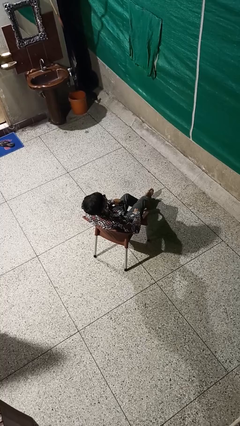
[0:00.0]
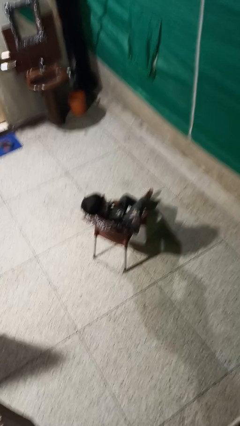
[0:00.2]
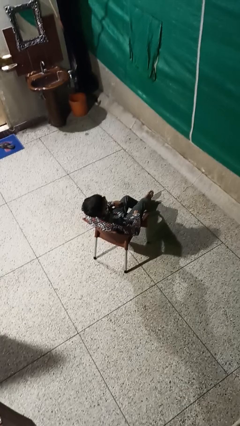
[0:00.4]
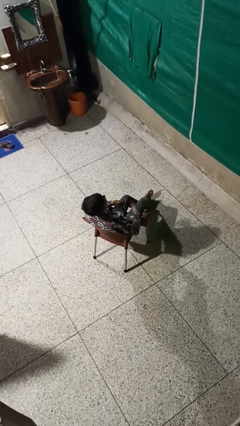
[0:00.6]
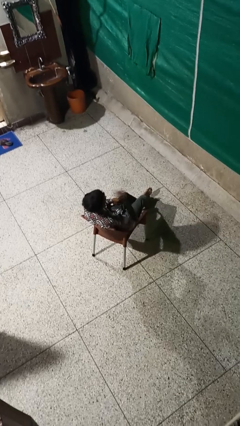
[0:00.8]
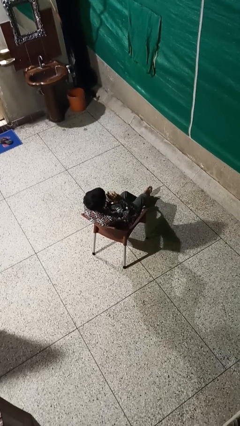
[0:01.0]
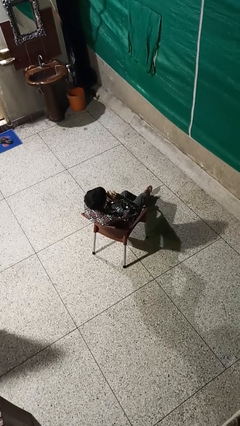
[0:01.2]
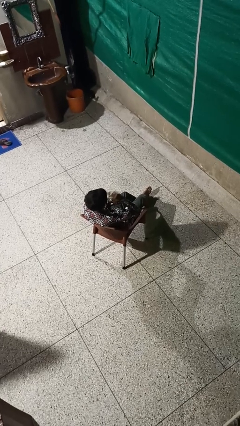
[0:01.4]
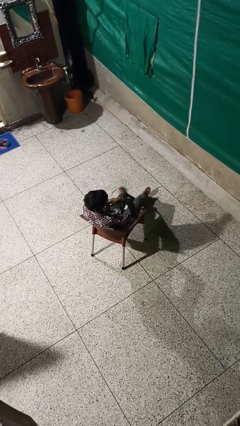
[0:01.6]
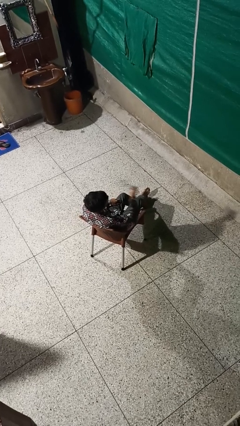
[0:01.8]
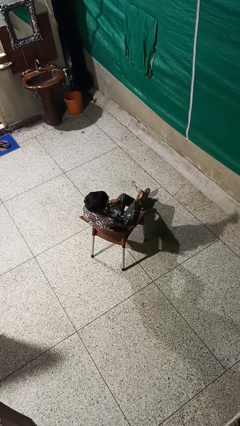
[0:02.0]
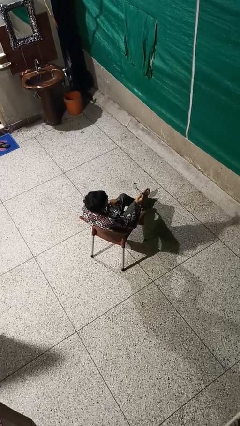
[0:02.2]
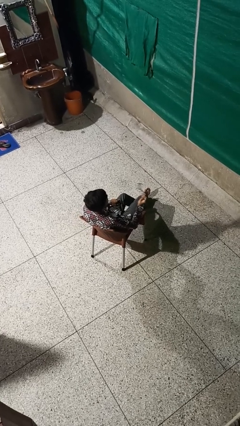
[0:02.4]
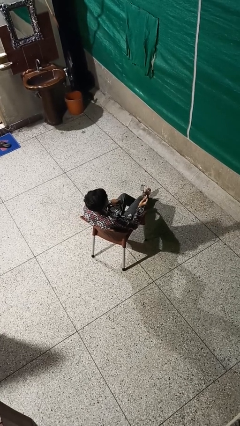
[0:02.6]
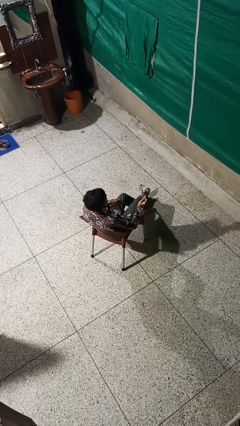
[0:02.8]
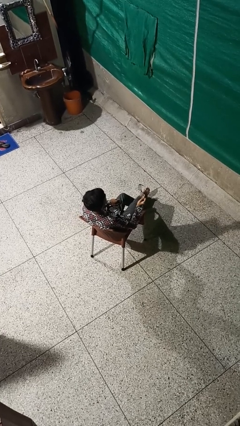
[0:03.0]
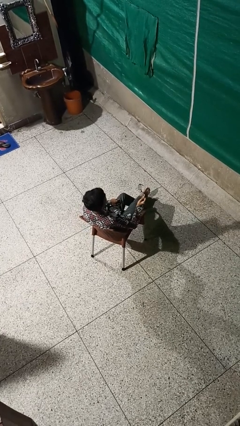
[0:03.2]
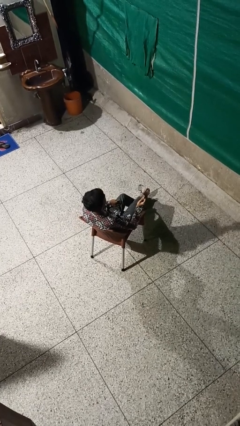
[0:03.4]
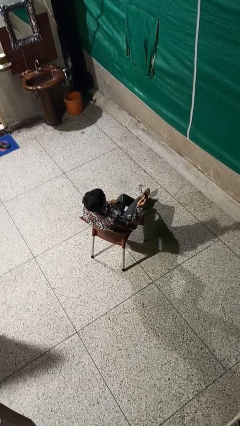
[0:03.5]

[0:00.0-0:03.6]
person takes off glasses

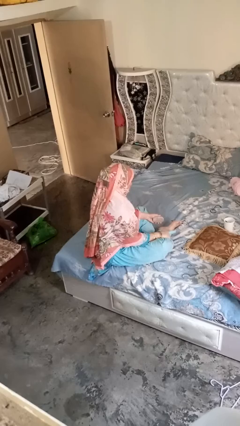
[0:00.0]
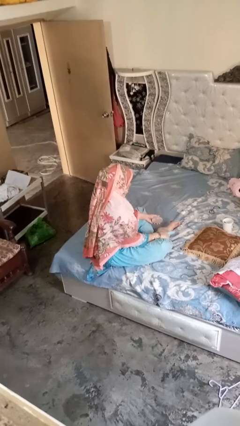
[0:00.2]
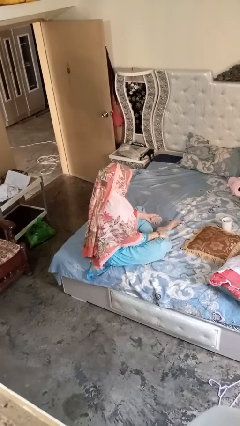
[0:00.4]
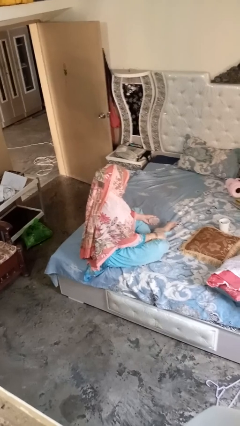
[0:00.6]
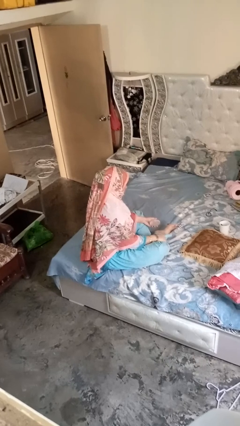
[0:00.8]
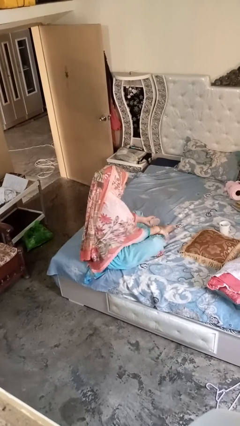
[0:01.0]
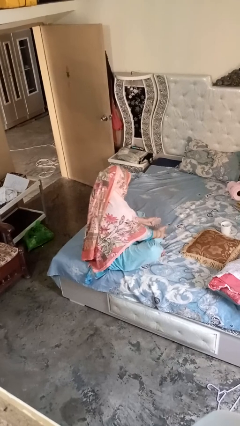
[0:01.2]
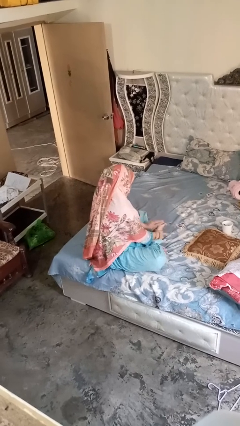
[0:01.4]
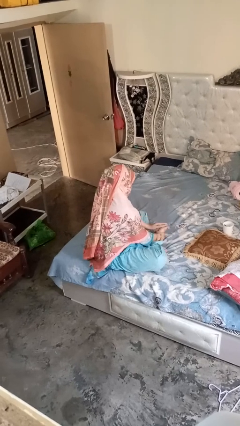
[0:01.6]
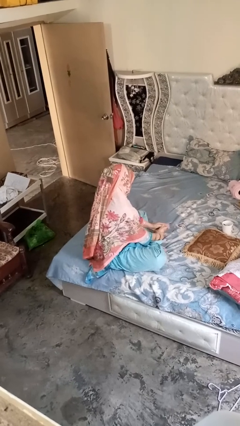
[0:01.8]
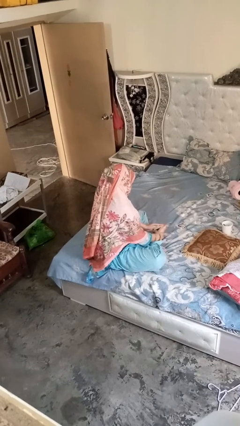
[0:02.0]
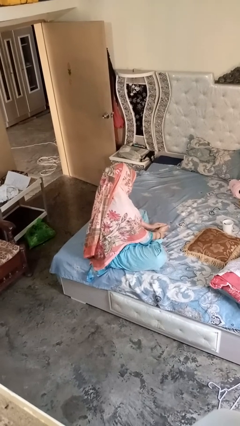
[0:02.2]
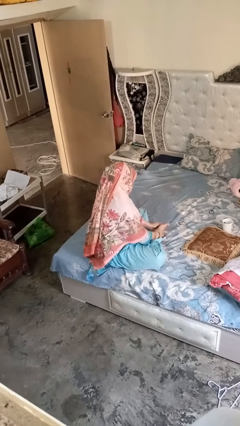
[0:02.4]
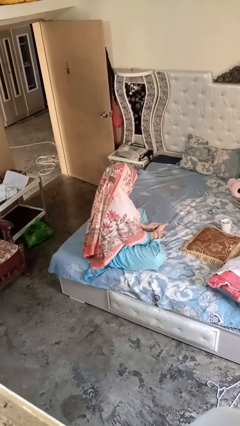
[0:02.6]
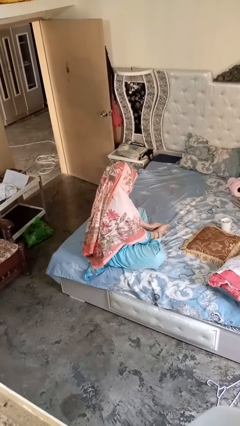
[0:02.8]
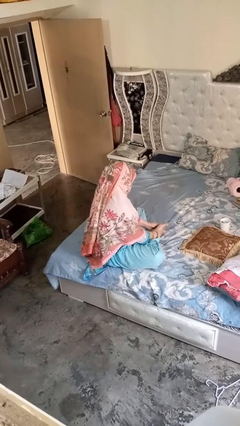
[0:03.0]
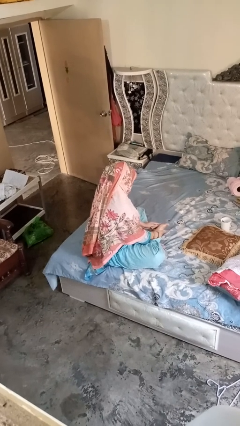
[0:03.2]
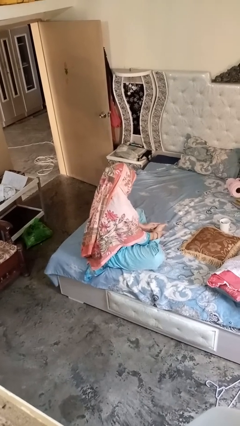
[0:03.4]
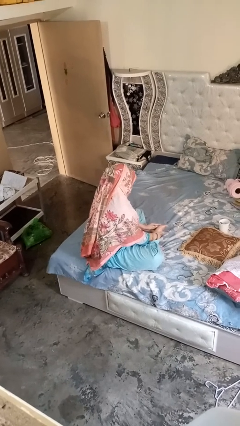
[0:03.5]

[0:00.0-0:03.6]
person rubs foot

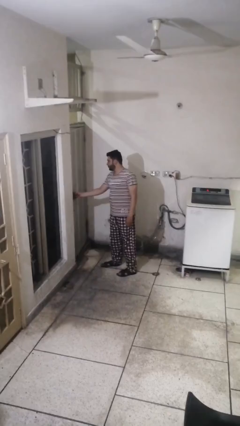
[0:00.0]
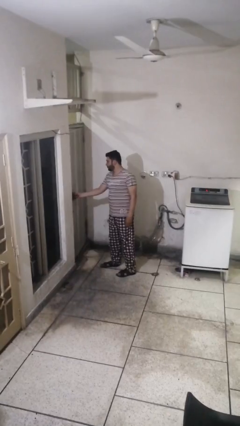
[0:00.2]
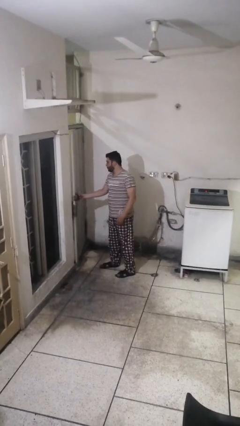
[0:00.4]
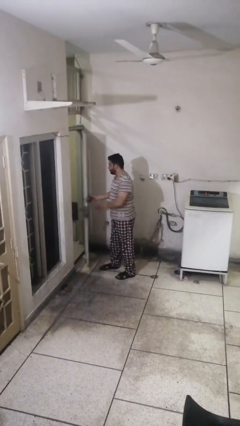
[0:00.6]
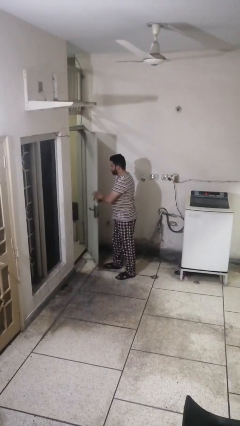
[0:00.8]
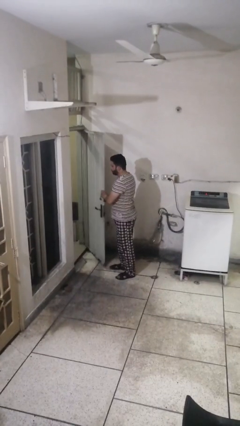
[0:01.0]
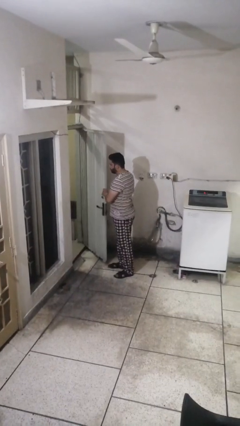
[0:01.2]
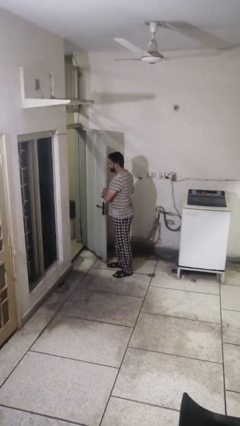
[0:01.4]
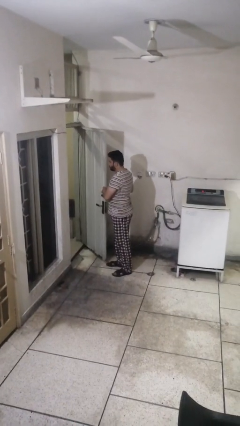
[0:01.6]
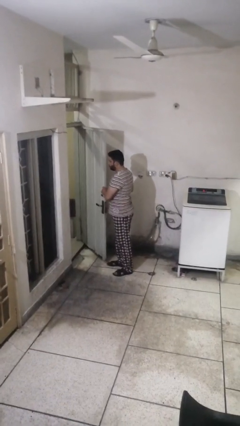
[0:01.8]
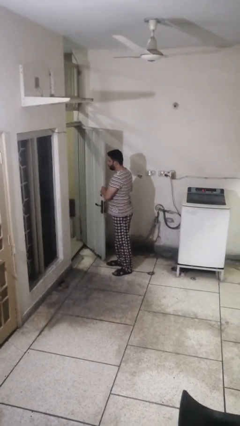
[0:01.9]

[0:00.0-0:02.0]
person opens facility door

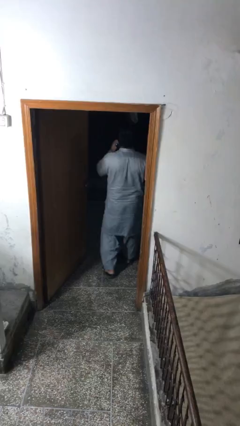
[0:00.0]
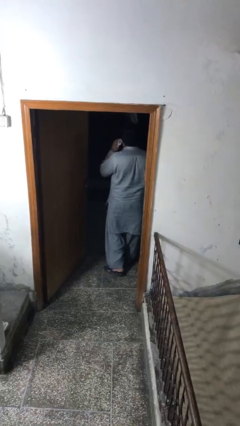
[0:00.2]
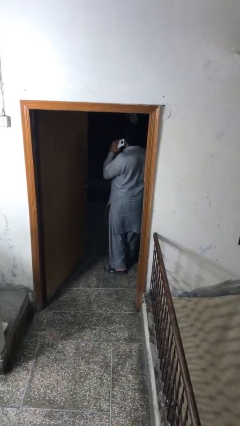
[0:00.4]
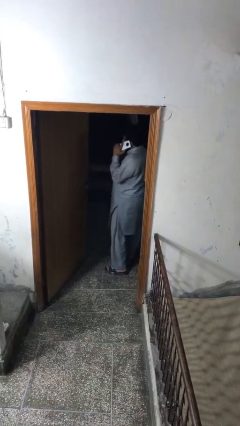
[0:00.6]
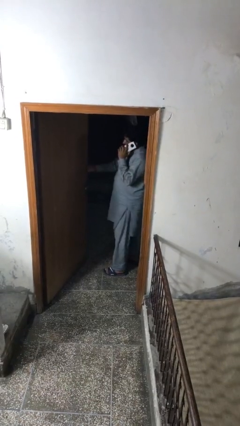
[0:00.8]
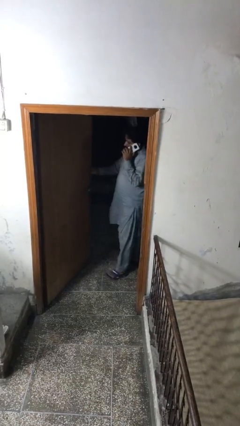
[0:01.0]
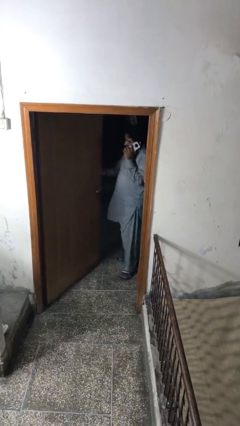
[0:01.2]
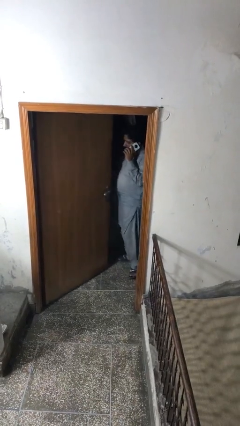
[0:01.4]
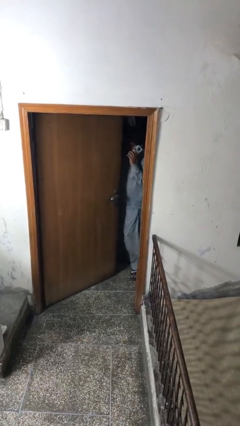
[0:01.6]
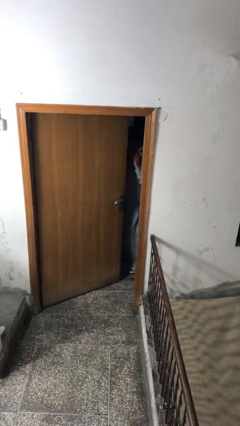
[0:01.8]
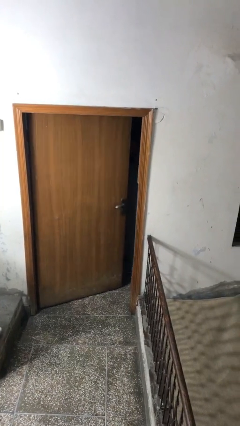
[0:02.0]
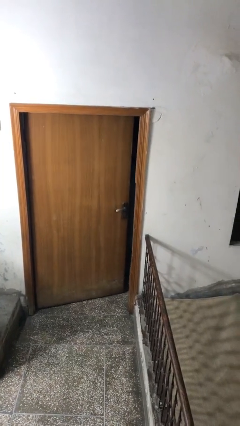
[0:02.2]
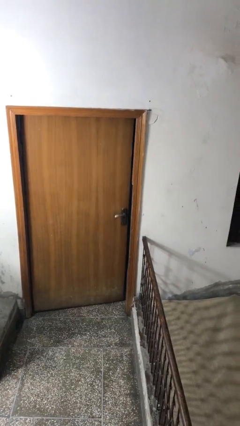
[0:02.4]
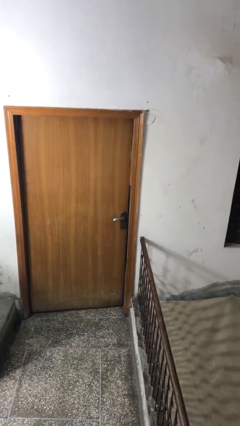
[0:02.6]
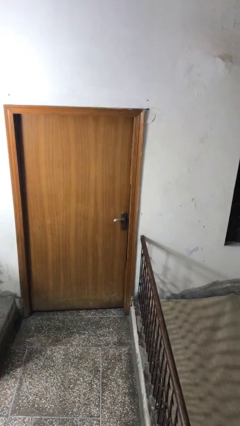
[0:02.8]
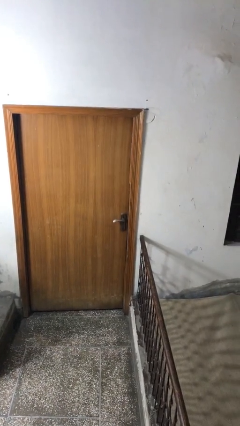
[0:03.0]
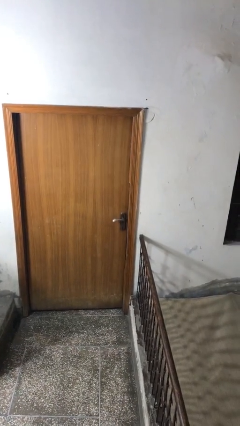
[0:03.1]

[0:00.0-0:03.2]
person closes facility door

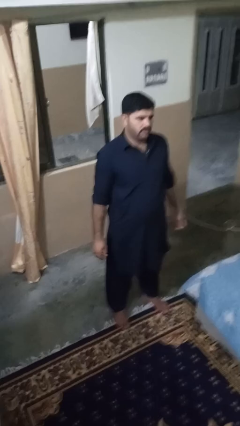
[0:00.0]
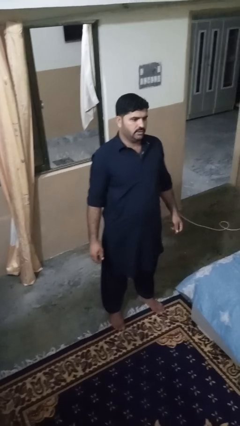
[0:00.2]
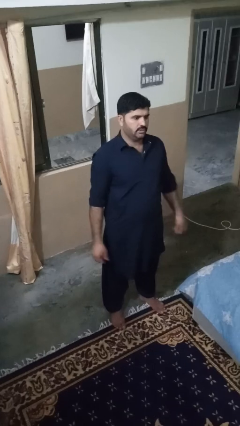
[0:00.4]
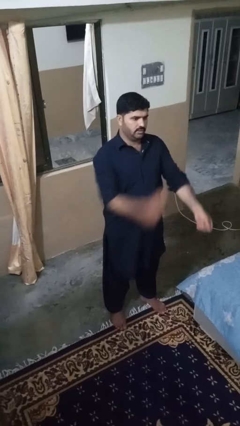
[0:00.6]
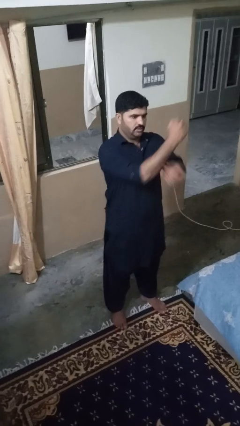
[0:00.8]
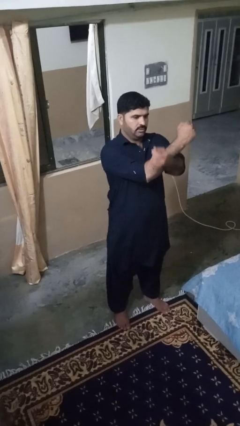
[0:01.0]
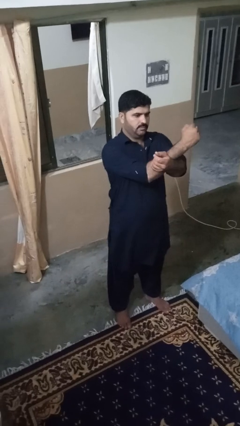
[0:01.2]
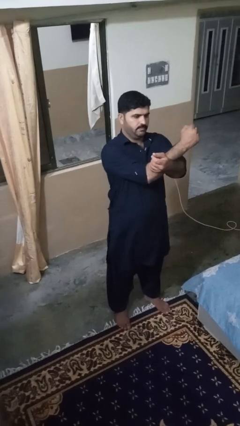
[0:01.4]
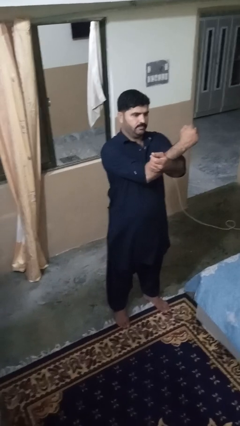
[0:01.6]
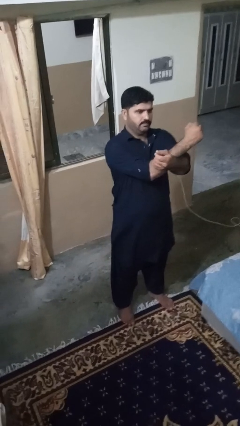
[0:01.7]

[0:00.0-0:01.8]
person crosses arms

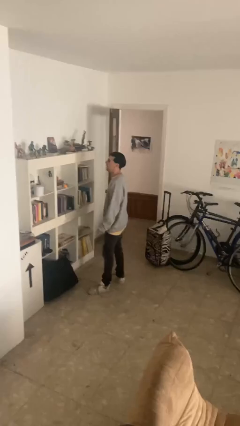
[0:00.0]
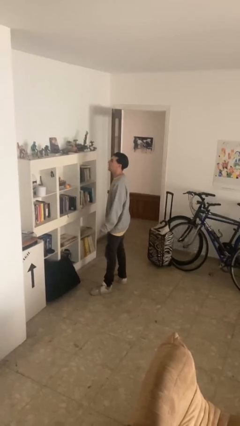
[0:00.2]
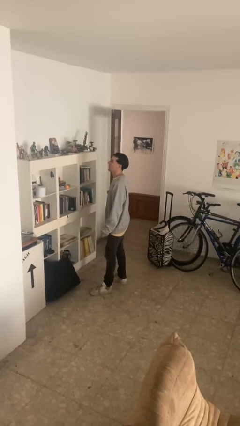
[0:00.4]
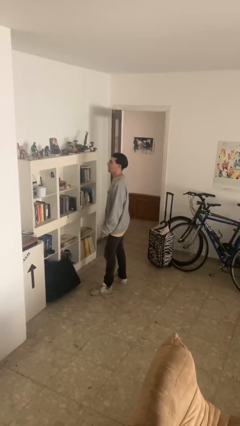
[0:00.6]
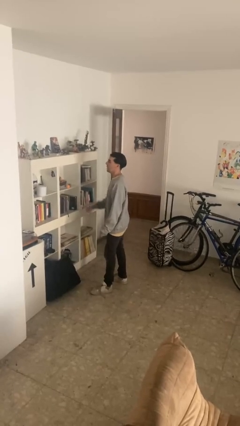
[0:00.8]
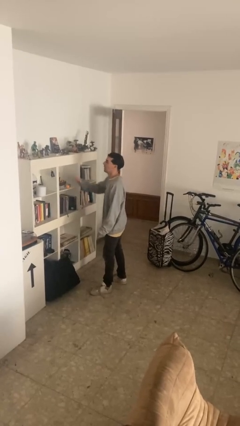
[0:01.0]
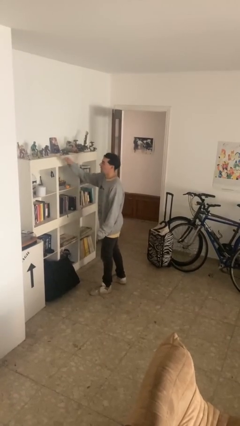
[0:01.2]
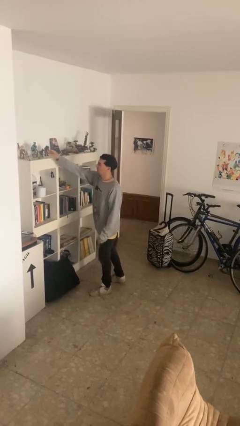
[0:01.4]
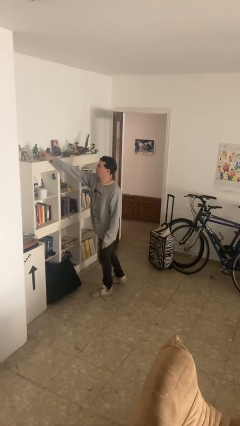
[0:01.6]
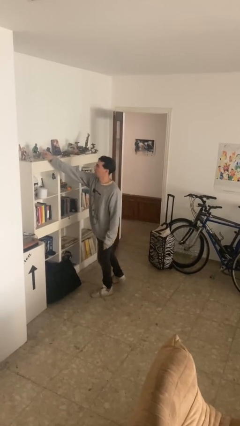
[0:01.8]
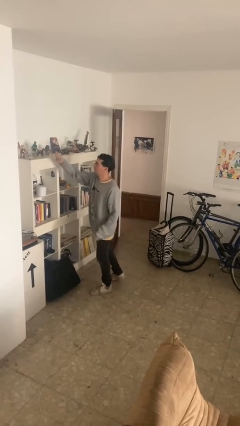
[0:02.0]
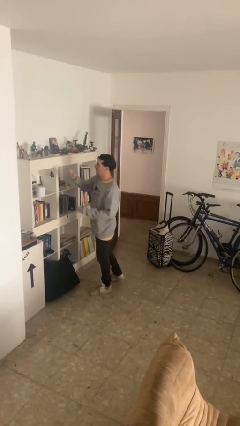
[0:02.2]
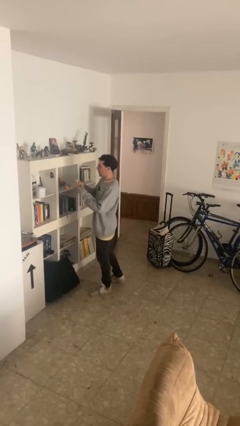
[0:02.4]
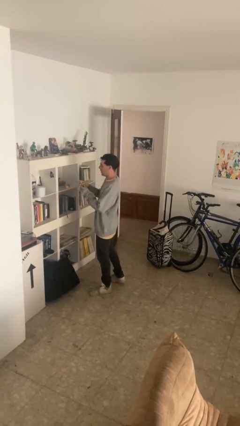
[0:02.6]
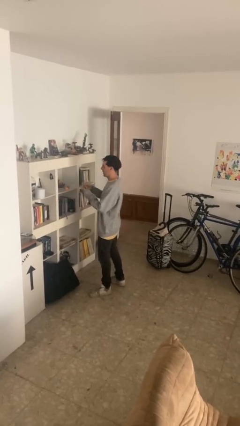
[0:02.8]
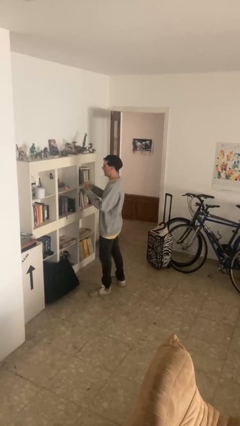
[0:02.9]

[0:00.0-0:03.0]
person picks up object from shelf

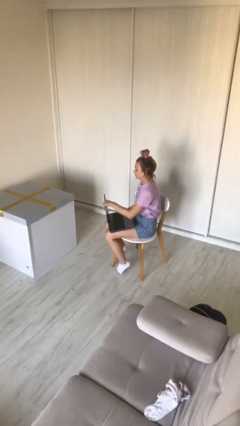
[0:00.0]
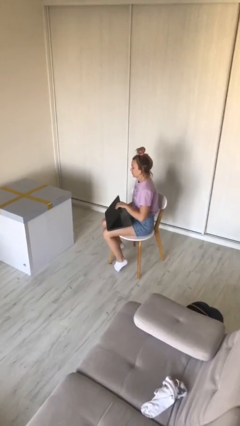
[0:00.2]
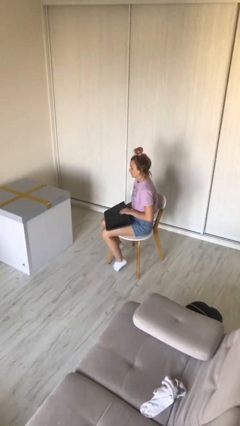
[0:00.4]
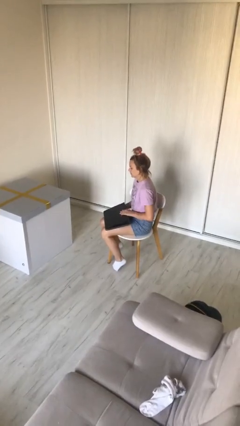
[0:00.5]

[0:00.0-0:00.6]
person closes laptop
